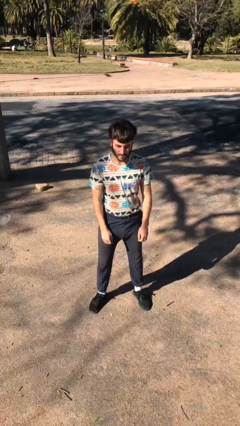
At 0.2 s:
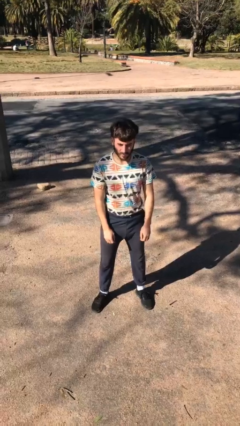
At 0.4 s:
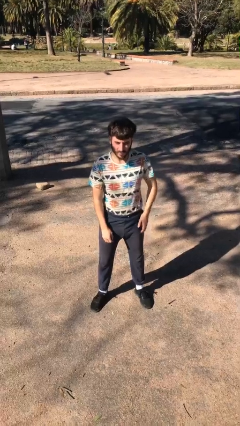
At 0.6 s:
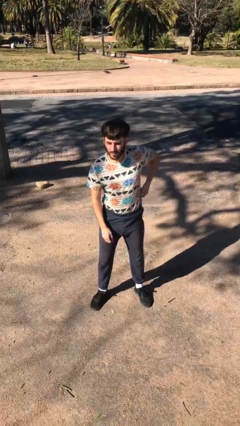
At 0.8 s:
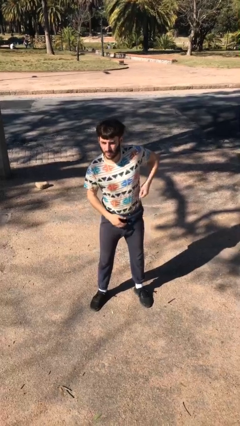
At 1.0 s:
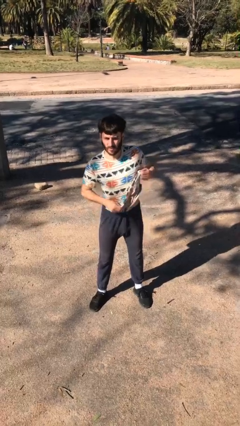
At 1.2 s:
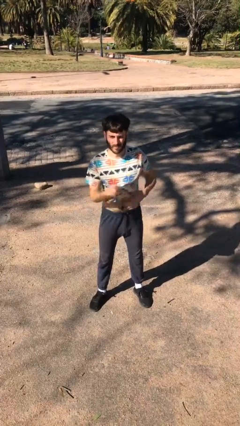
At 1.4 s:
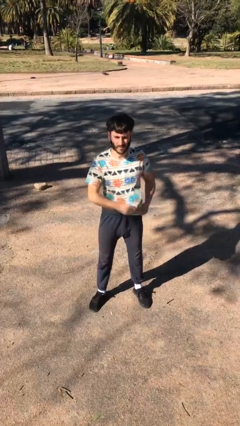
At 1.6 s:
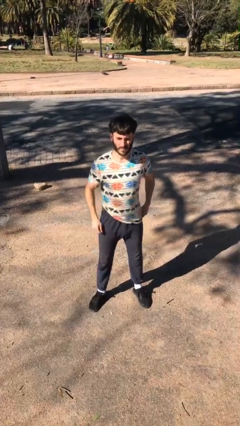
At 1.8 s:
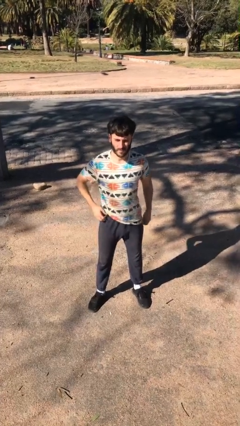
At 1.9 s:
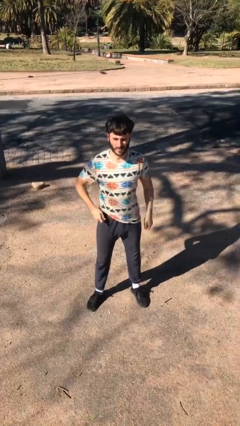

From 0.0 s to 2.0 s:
person untucks shirt

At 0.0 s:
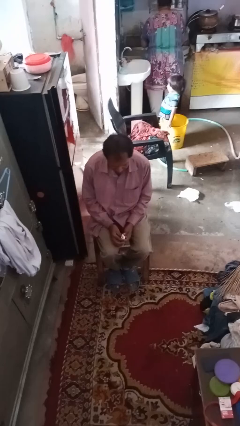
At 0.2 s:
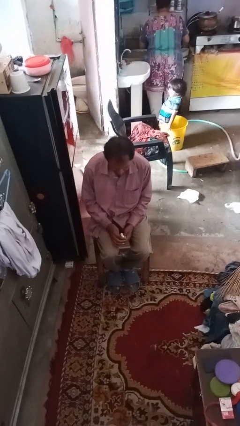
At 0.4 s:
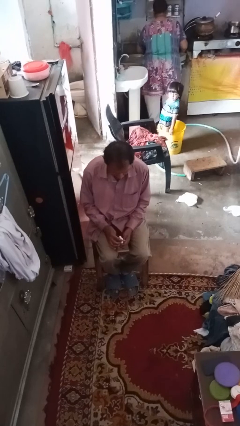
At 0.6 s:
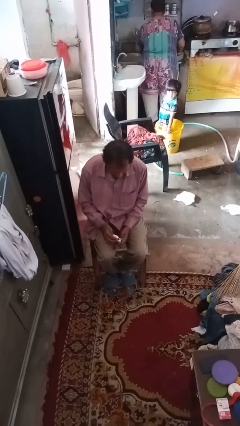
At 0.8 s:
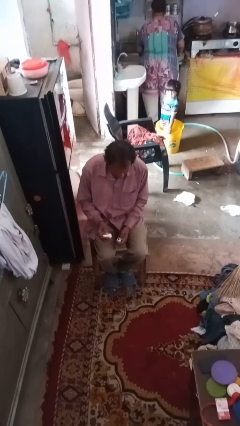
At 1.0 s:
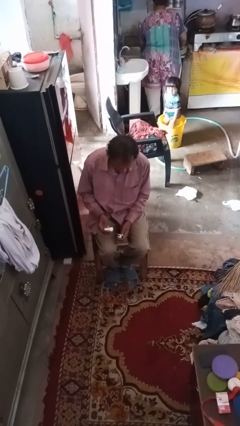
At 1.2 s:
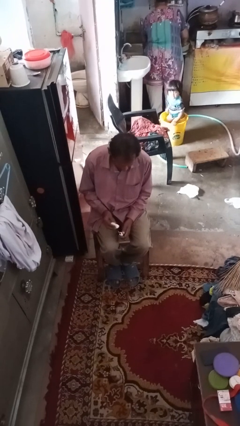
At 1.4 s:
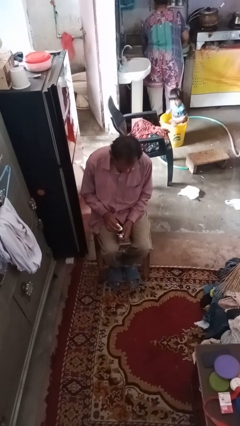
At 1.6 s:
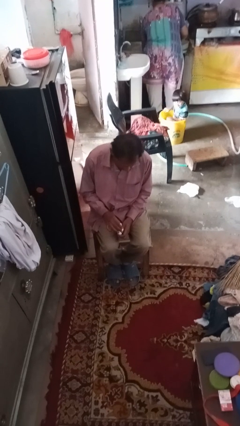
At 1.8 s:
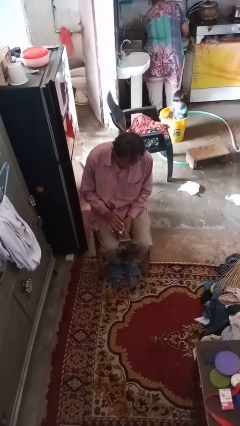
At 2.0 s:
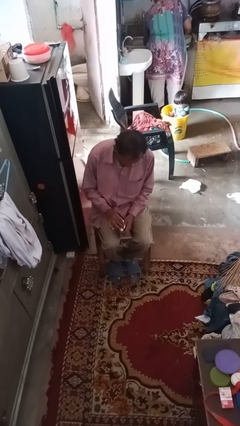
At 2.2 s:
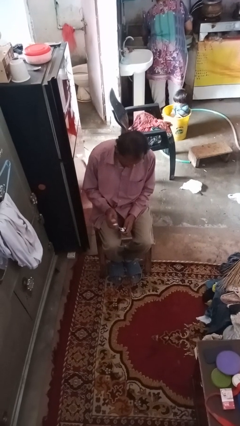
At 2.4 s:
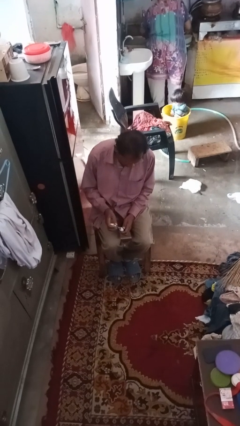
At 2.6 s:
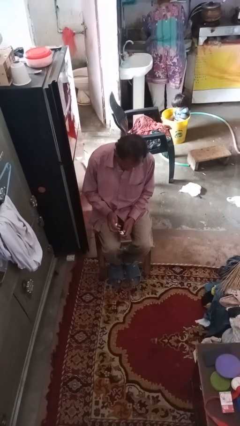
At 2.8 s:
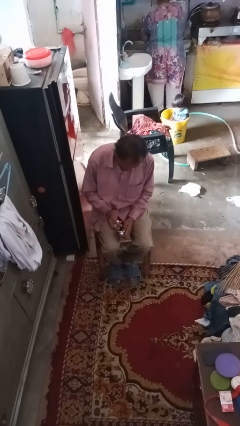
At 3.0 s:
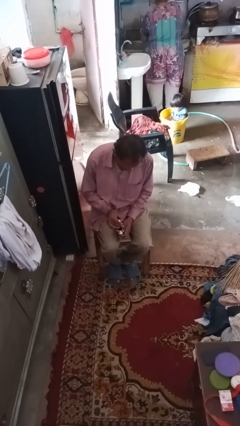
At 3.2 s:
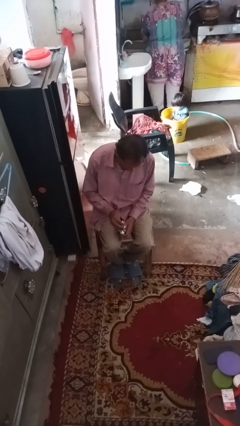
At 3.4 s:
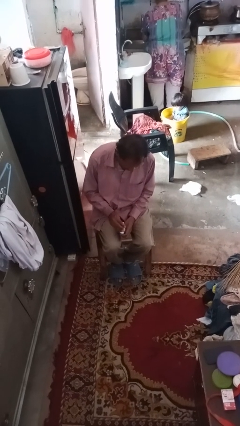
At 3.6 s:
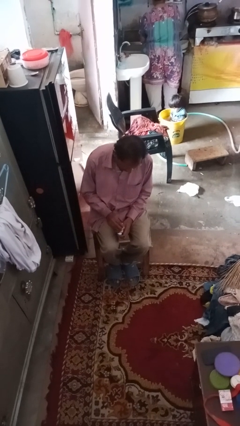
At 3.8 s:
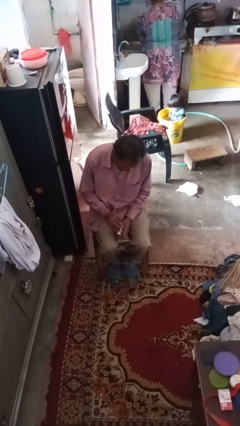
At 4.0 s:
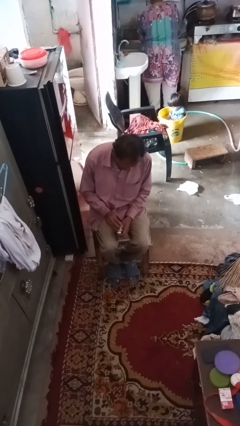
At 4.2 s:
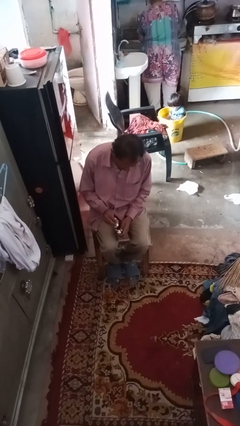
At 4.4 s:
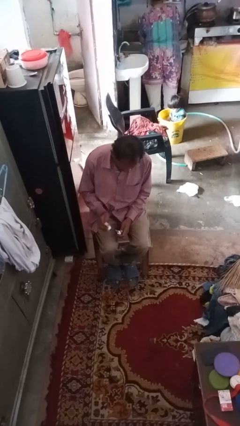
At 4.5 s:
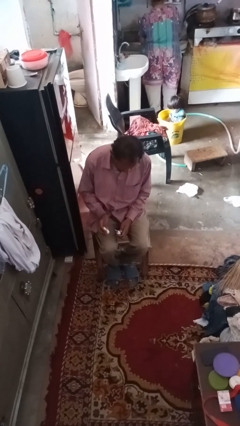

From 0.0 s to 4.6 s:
person paints fingernails

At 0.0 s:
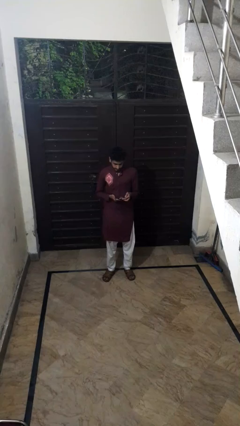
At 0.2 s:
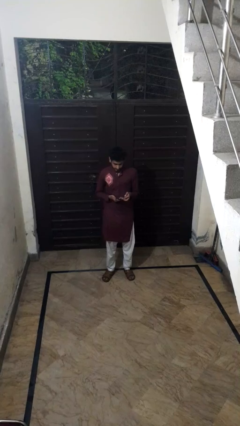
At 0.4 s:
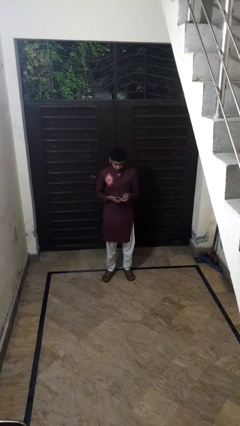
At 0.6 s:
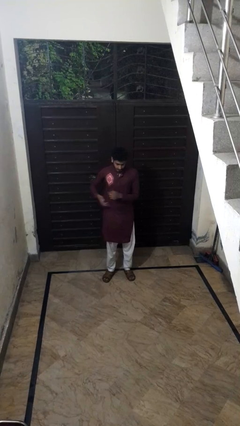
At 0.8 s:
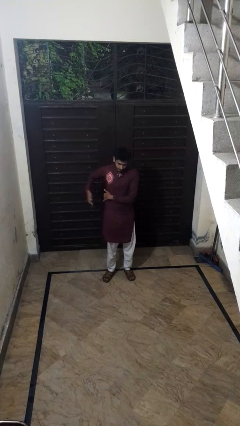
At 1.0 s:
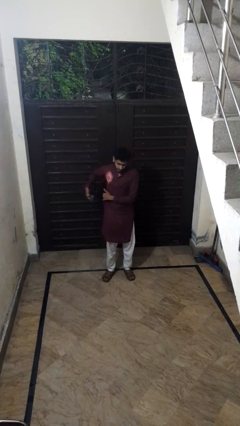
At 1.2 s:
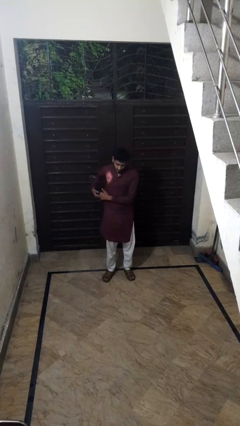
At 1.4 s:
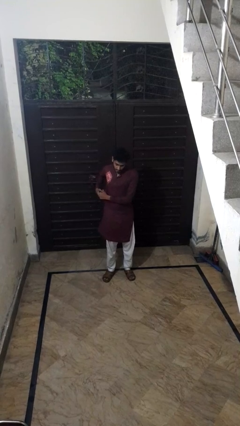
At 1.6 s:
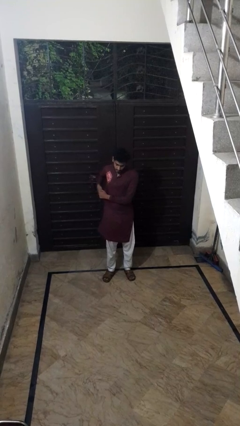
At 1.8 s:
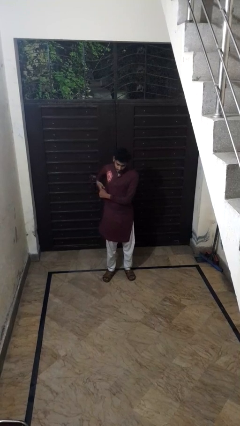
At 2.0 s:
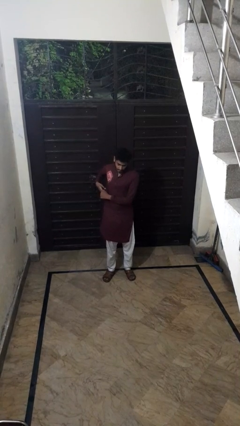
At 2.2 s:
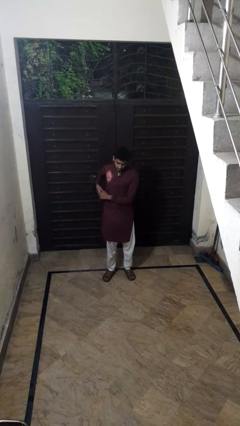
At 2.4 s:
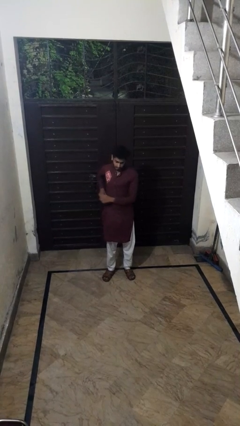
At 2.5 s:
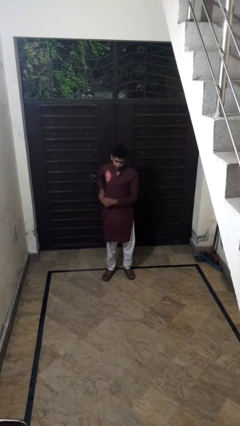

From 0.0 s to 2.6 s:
person puts phone into pocket

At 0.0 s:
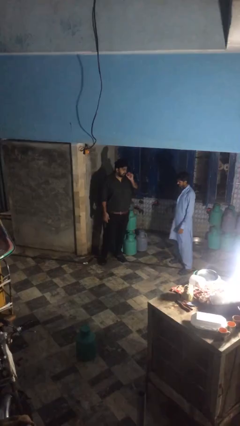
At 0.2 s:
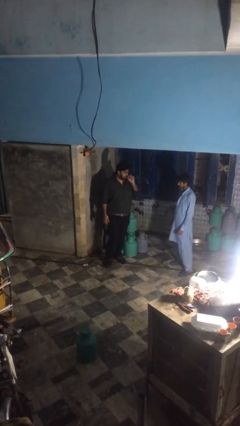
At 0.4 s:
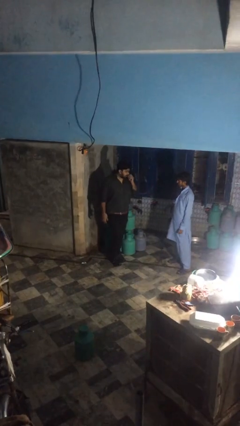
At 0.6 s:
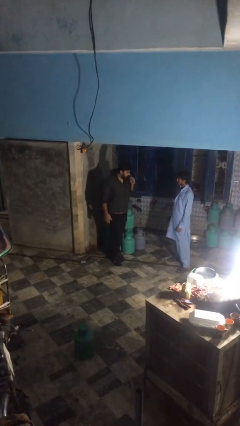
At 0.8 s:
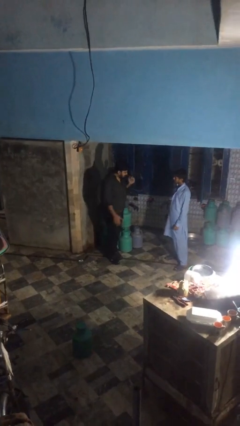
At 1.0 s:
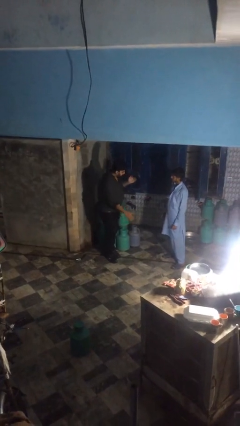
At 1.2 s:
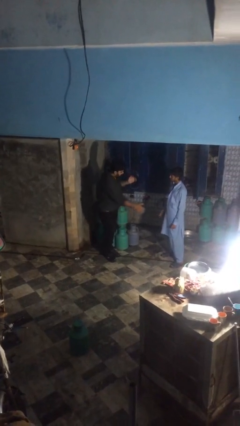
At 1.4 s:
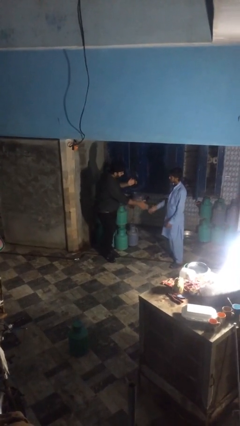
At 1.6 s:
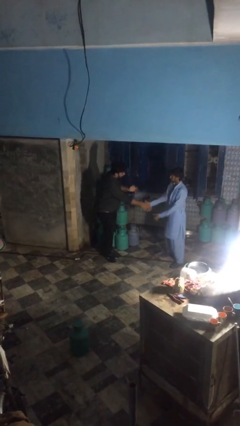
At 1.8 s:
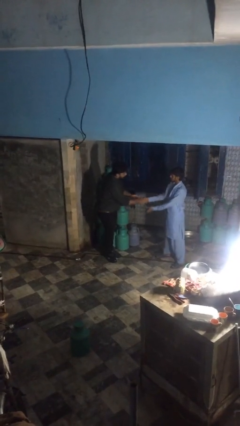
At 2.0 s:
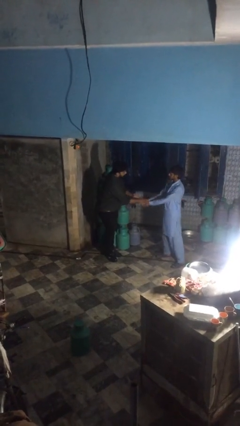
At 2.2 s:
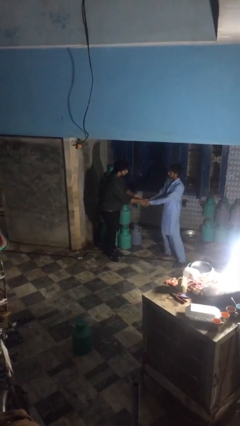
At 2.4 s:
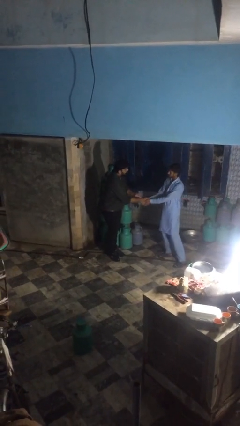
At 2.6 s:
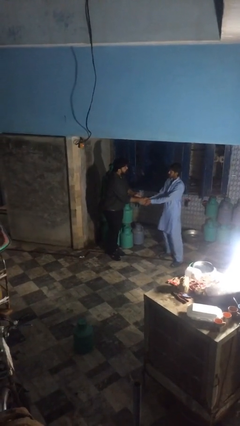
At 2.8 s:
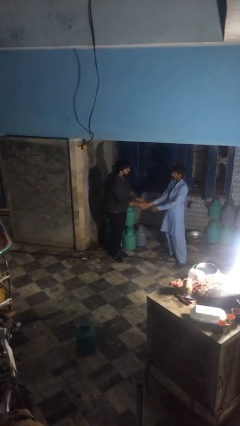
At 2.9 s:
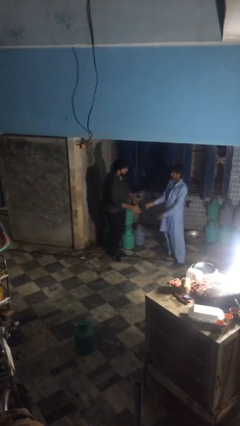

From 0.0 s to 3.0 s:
person shakes hand

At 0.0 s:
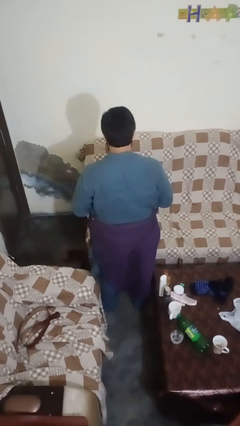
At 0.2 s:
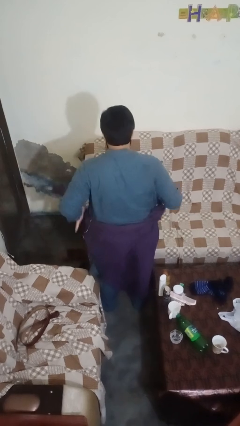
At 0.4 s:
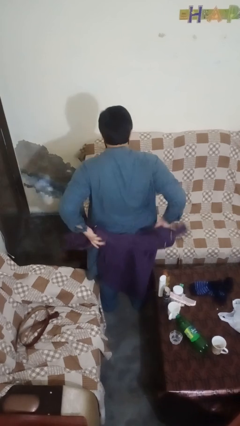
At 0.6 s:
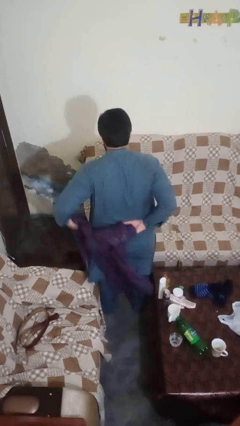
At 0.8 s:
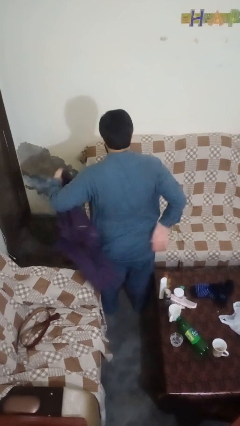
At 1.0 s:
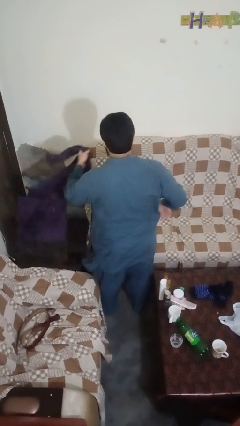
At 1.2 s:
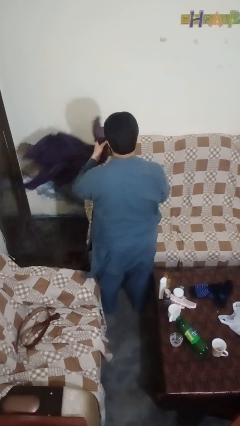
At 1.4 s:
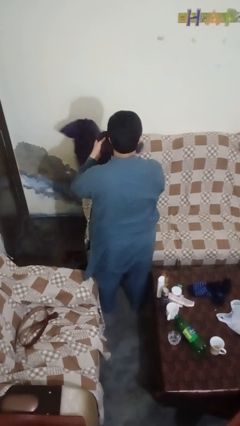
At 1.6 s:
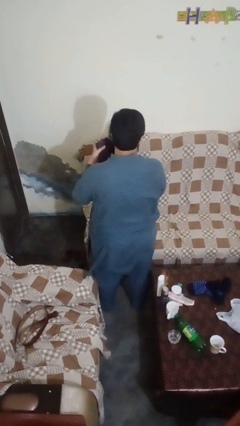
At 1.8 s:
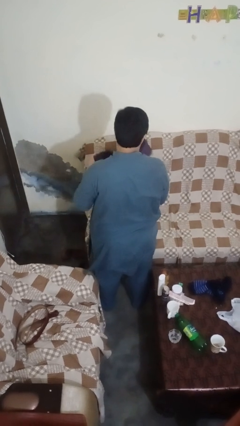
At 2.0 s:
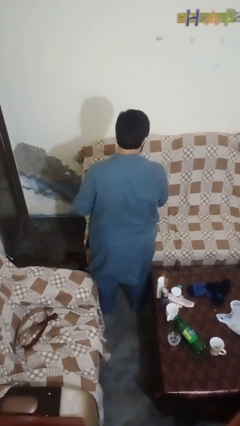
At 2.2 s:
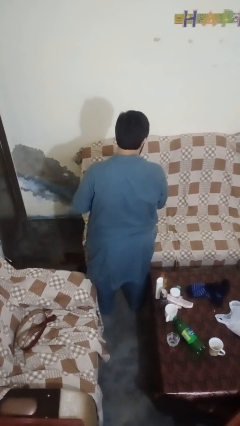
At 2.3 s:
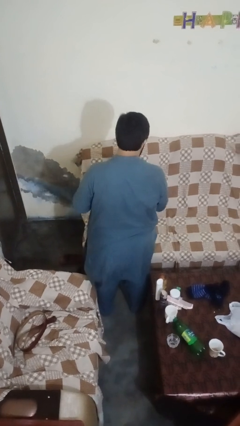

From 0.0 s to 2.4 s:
person unties jacket around waist

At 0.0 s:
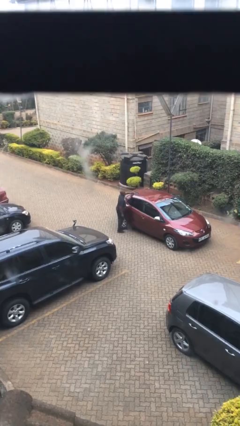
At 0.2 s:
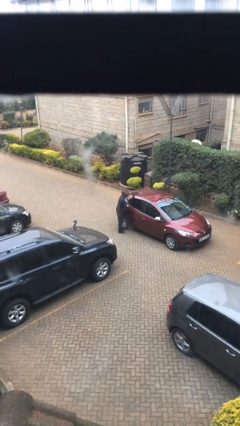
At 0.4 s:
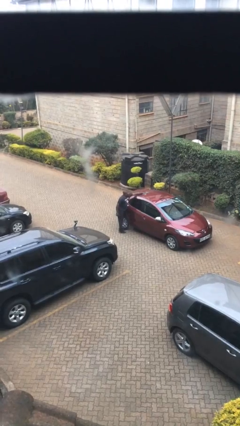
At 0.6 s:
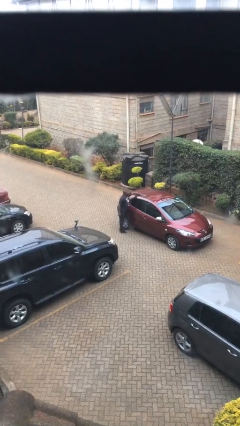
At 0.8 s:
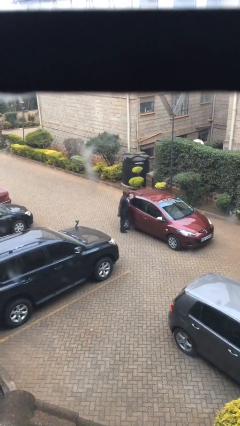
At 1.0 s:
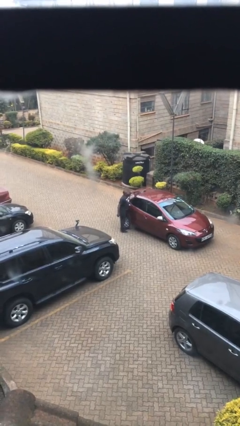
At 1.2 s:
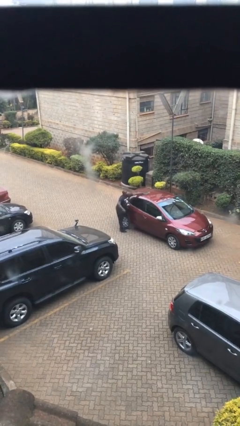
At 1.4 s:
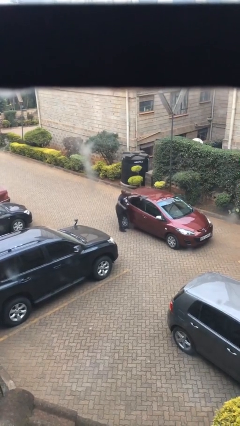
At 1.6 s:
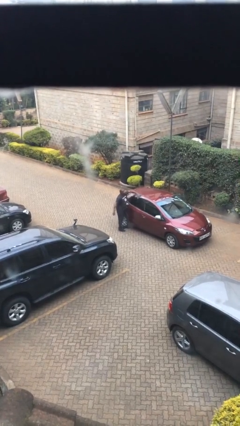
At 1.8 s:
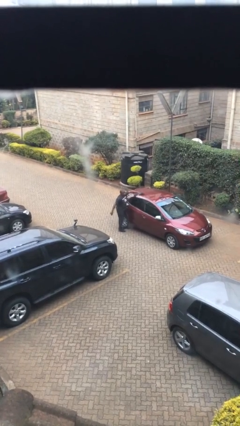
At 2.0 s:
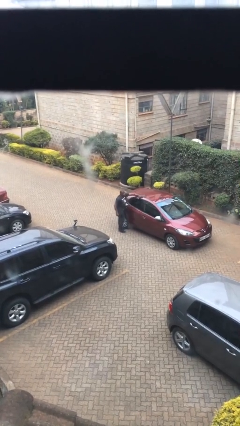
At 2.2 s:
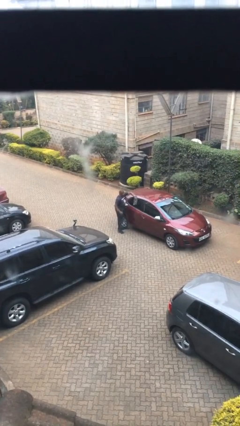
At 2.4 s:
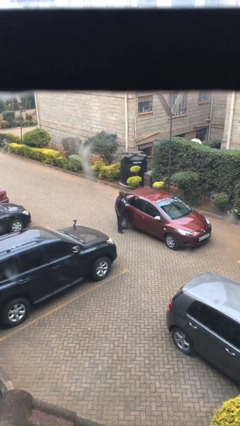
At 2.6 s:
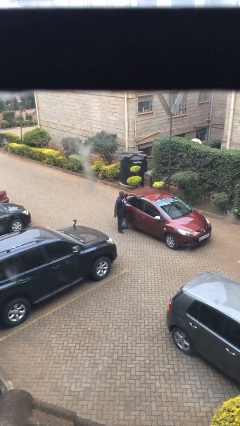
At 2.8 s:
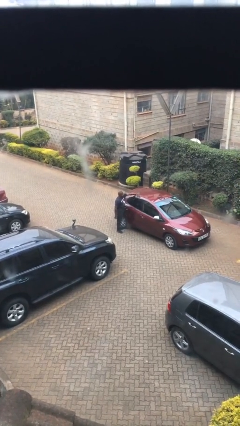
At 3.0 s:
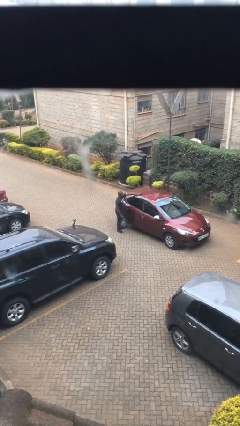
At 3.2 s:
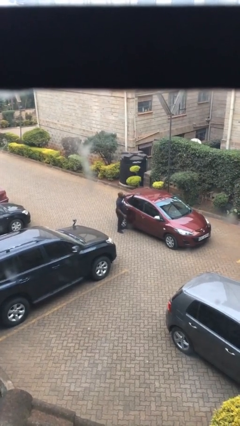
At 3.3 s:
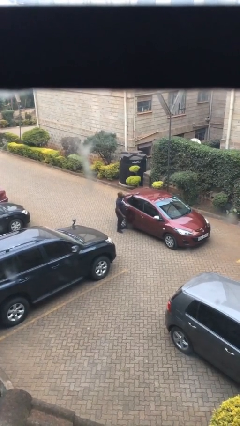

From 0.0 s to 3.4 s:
person polishes car with rag
